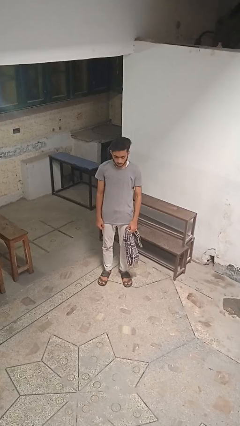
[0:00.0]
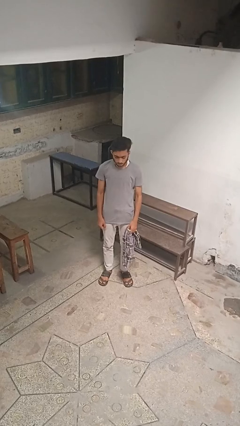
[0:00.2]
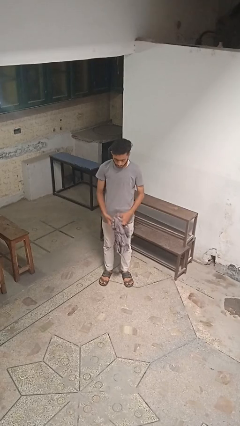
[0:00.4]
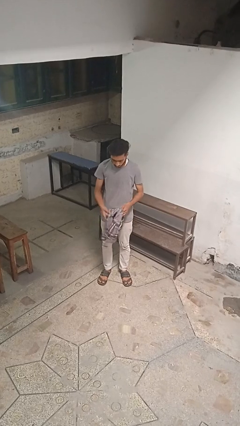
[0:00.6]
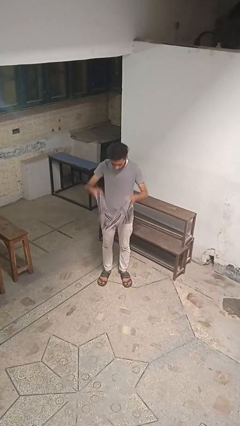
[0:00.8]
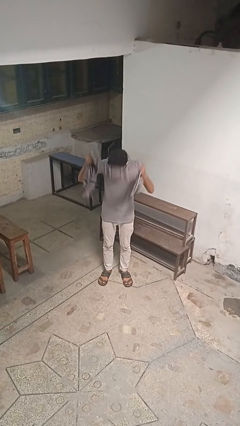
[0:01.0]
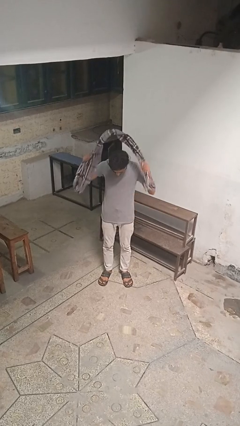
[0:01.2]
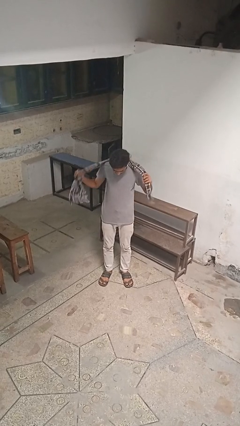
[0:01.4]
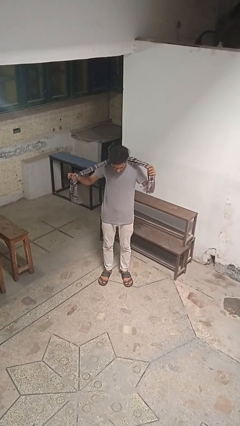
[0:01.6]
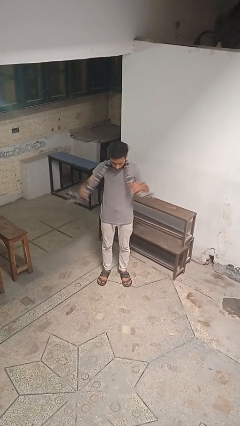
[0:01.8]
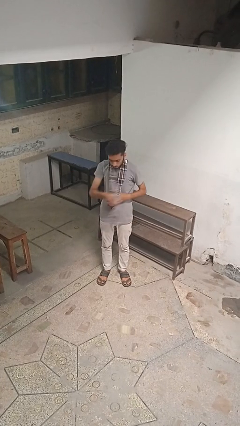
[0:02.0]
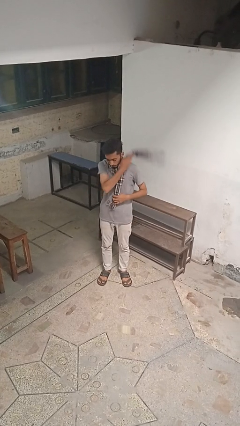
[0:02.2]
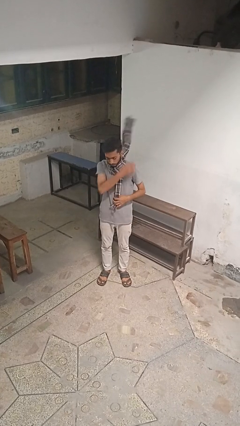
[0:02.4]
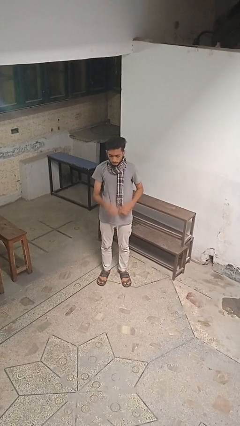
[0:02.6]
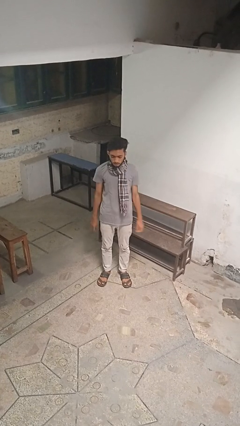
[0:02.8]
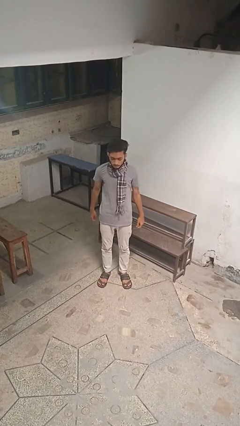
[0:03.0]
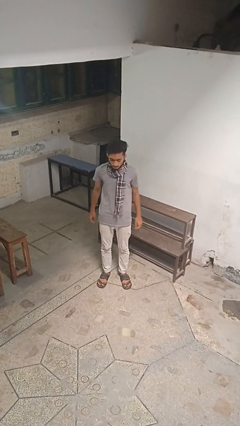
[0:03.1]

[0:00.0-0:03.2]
person puts on scarf

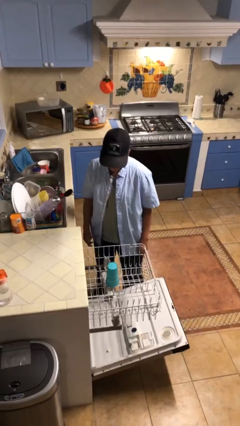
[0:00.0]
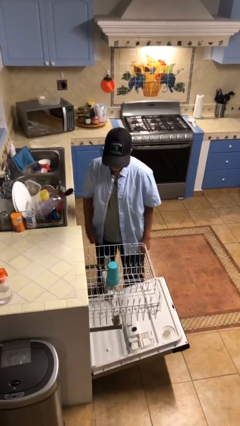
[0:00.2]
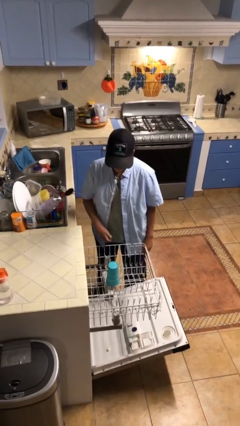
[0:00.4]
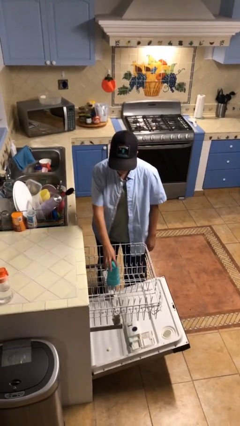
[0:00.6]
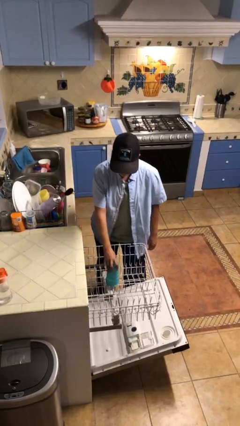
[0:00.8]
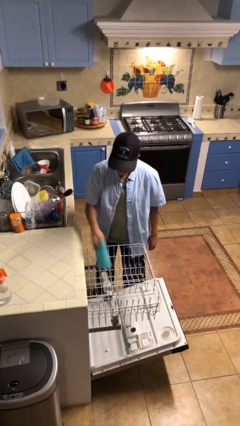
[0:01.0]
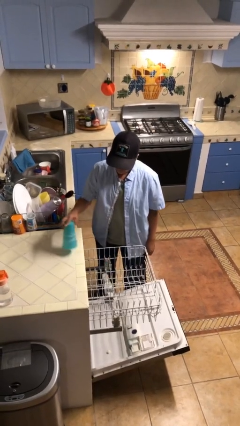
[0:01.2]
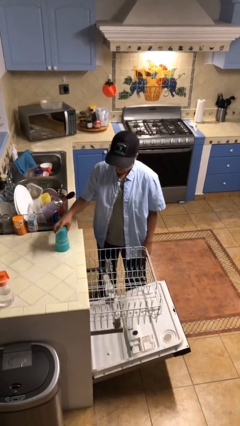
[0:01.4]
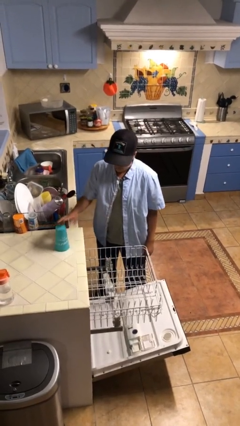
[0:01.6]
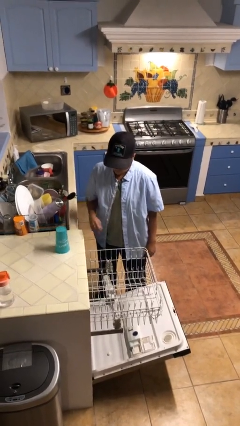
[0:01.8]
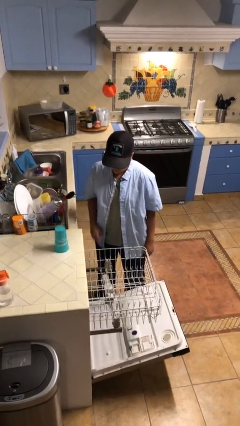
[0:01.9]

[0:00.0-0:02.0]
person unloads dishwasher

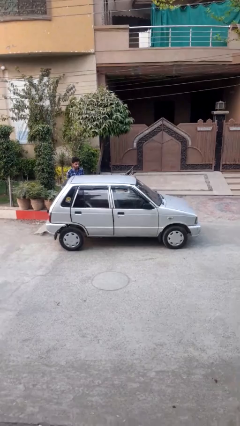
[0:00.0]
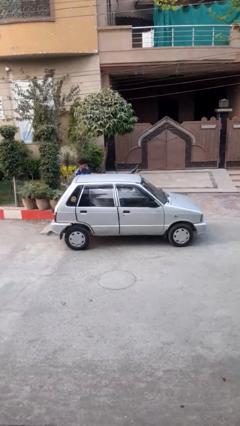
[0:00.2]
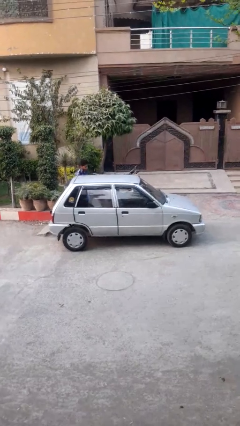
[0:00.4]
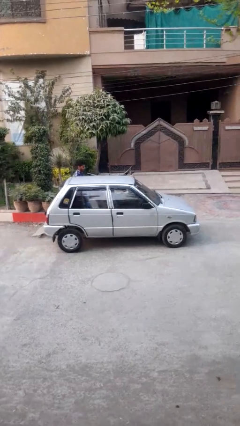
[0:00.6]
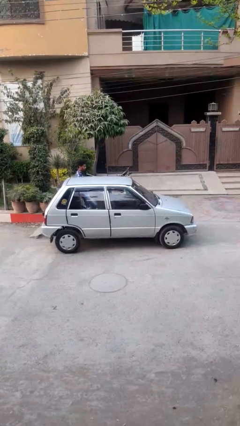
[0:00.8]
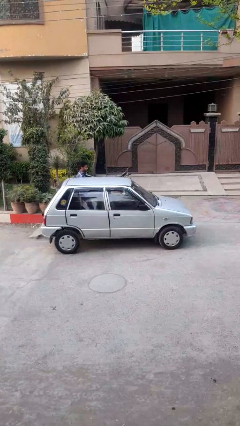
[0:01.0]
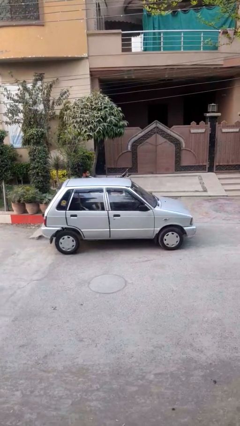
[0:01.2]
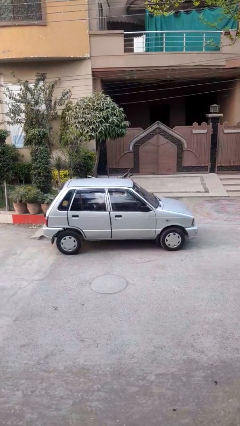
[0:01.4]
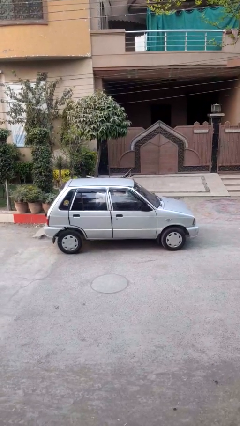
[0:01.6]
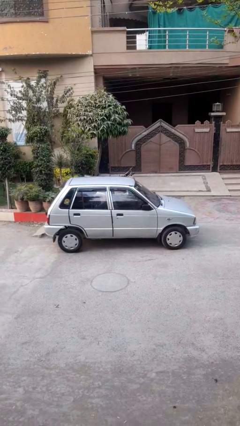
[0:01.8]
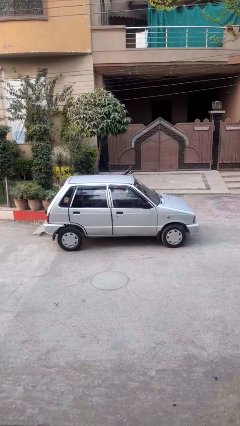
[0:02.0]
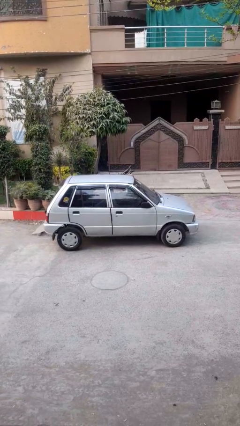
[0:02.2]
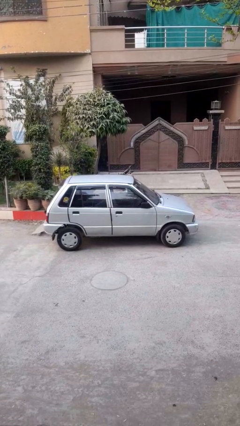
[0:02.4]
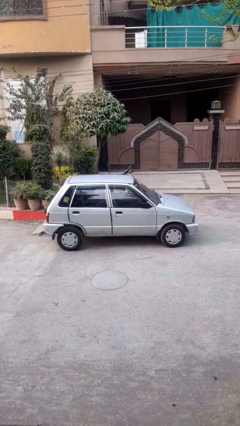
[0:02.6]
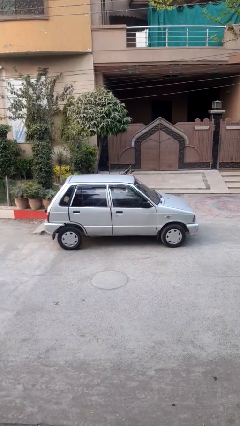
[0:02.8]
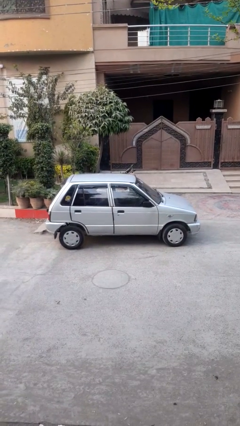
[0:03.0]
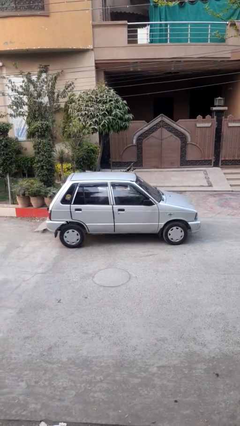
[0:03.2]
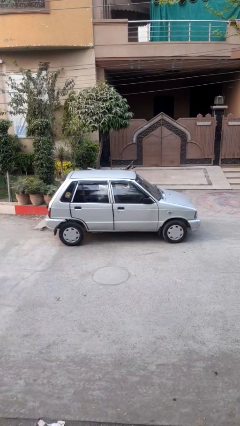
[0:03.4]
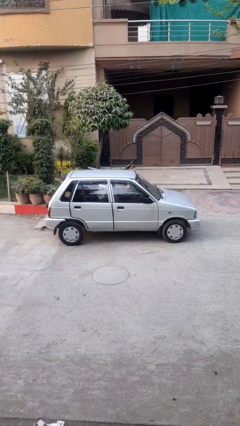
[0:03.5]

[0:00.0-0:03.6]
car picks up person

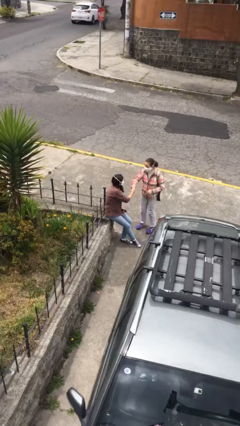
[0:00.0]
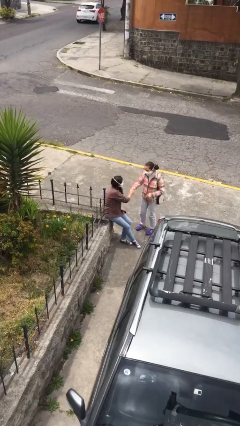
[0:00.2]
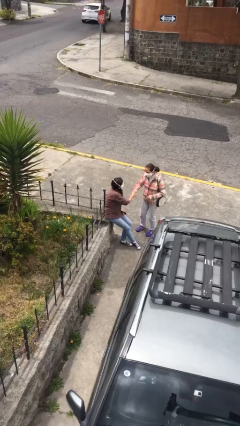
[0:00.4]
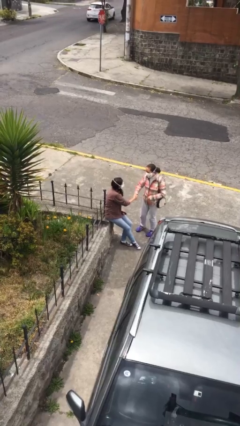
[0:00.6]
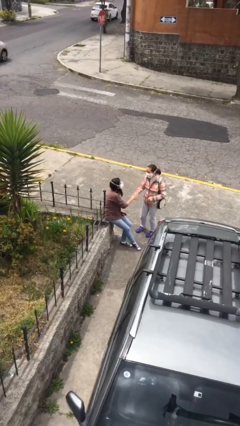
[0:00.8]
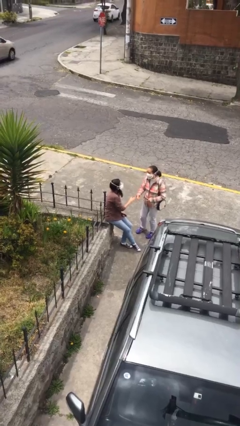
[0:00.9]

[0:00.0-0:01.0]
person shakes hand

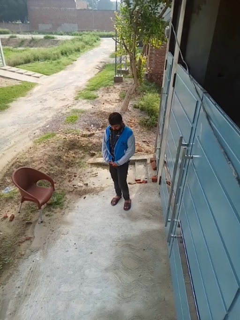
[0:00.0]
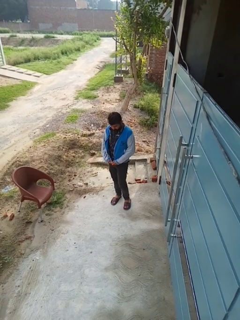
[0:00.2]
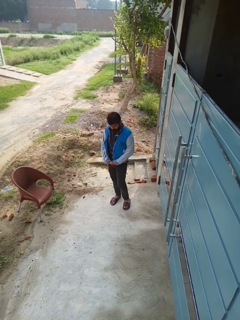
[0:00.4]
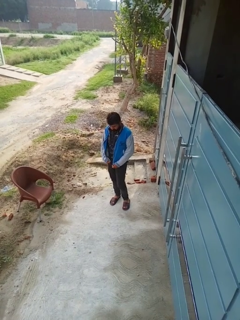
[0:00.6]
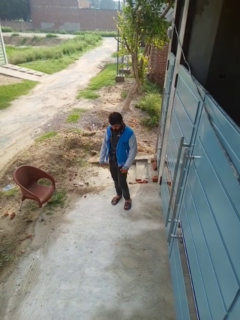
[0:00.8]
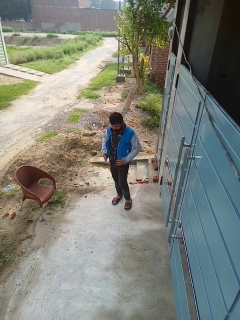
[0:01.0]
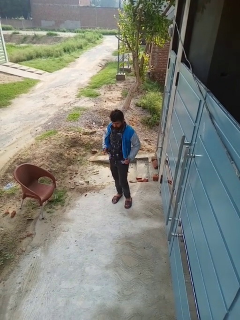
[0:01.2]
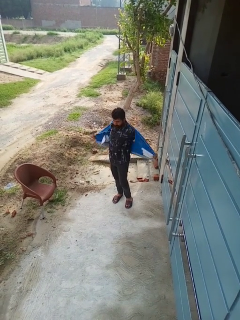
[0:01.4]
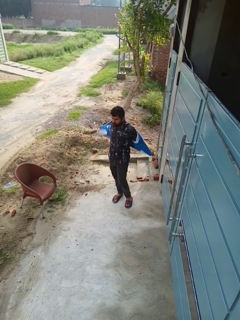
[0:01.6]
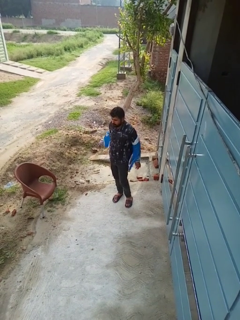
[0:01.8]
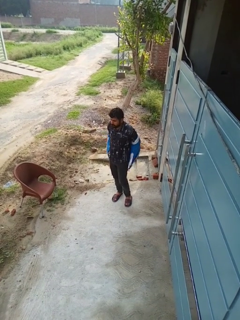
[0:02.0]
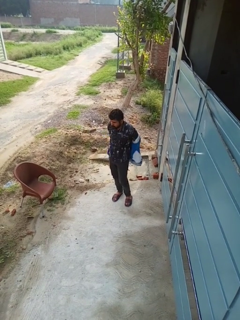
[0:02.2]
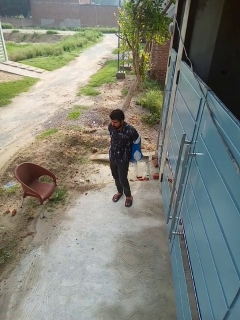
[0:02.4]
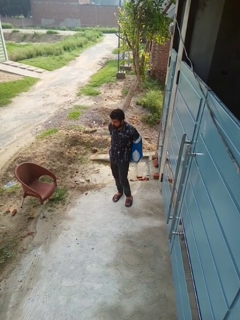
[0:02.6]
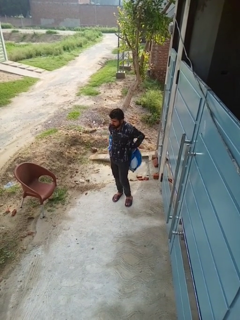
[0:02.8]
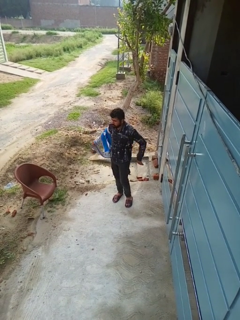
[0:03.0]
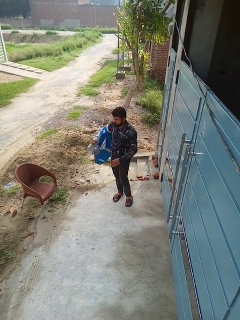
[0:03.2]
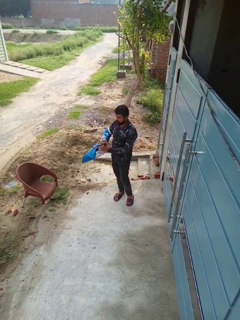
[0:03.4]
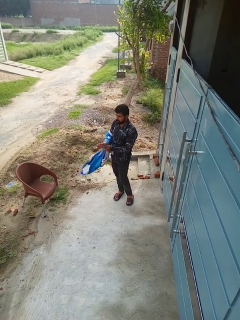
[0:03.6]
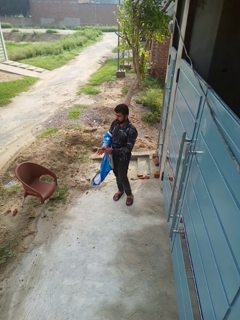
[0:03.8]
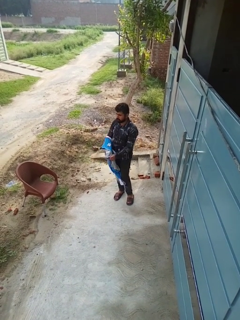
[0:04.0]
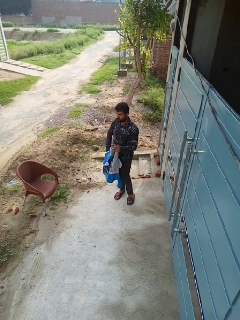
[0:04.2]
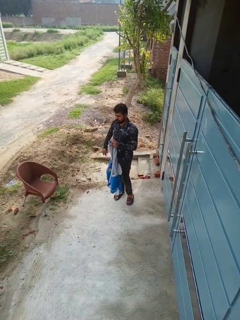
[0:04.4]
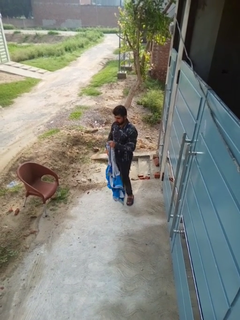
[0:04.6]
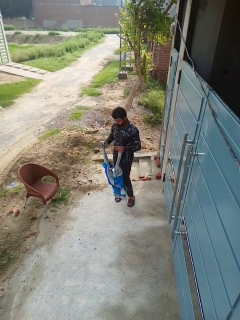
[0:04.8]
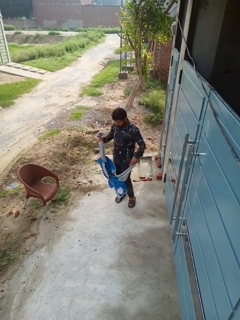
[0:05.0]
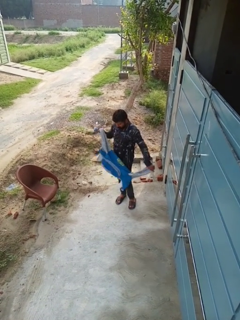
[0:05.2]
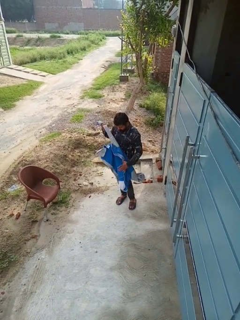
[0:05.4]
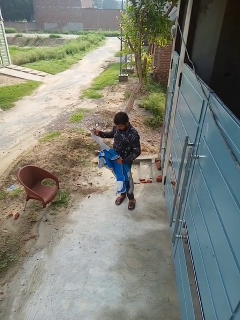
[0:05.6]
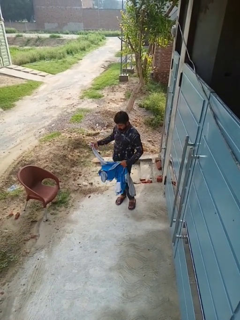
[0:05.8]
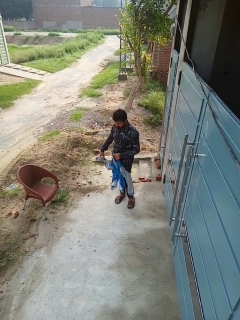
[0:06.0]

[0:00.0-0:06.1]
person takes off jacket

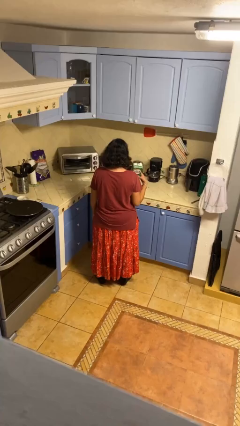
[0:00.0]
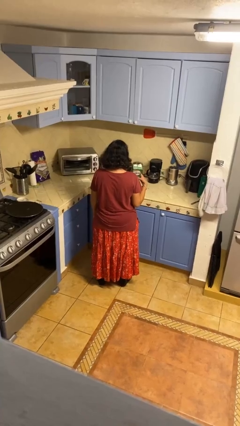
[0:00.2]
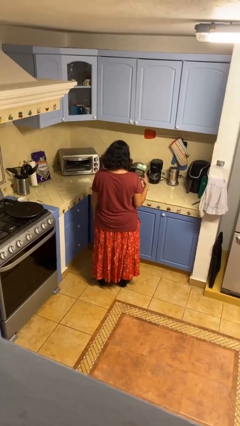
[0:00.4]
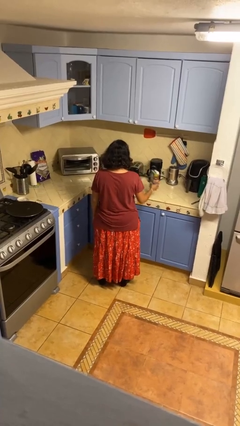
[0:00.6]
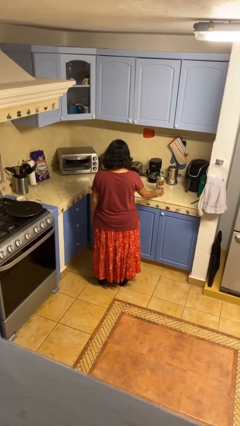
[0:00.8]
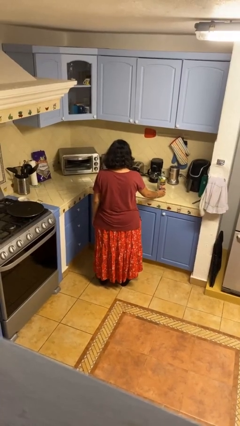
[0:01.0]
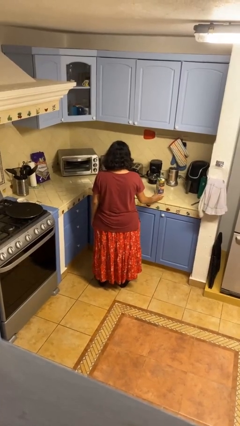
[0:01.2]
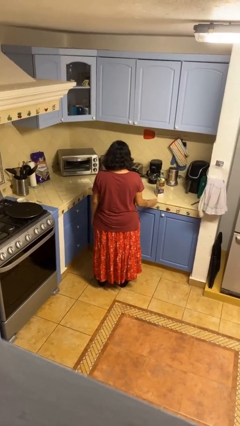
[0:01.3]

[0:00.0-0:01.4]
person puts down object on countertop

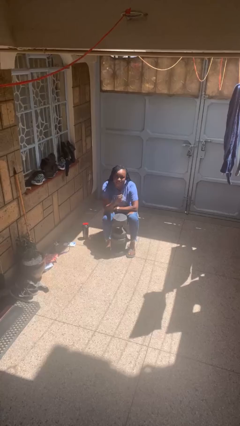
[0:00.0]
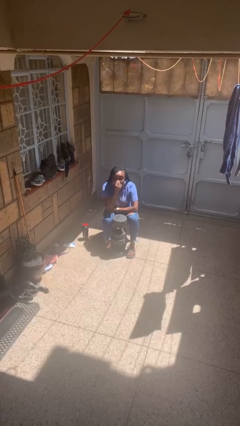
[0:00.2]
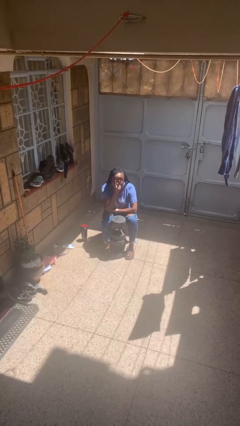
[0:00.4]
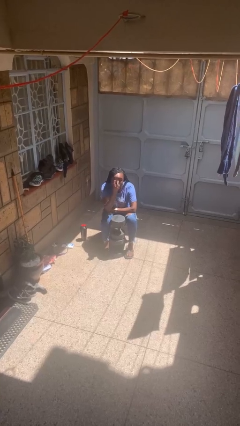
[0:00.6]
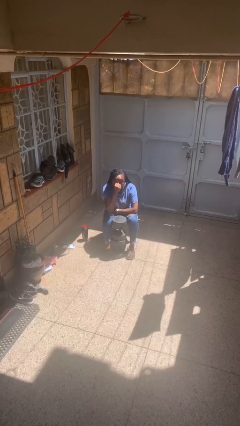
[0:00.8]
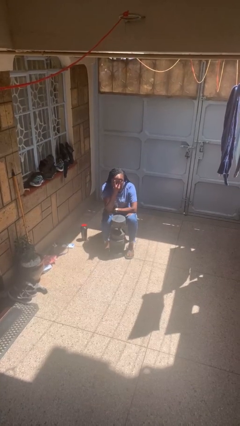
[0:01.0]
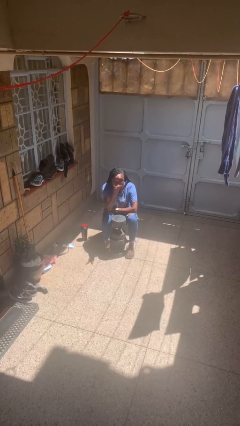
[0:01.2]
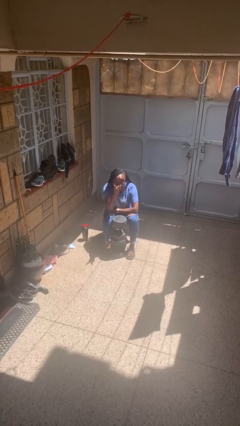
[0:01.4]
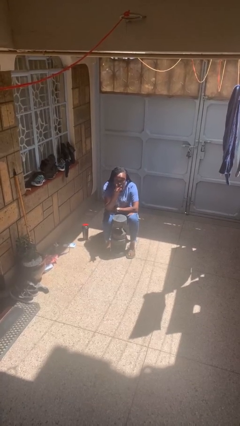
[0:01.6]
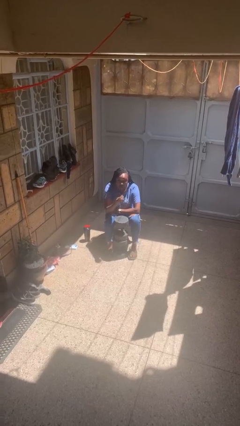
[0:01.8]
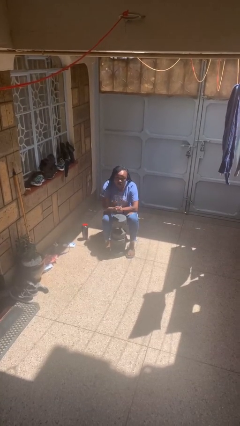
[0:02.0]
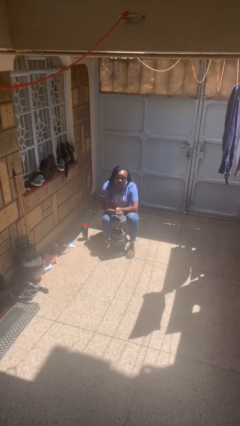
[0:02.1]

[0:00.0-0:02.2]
person gestures watch closely
